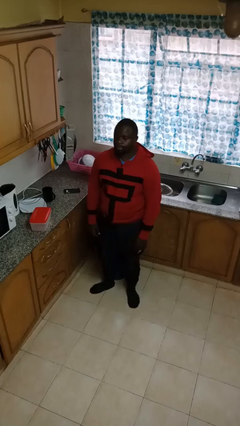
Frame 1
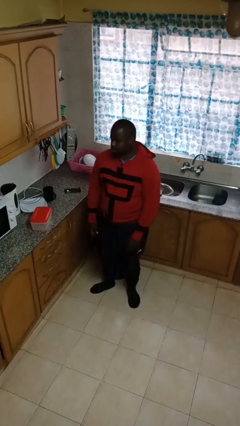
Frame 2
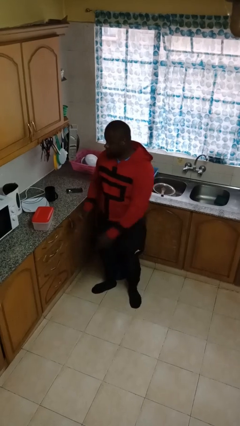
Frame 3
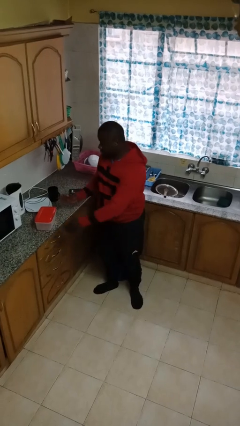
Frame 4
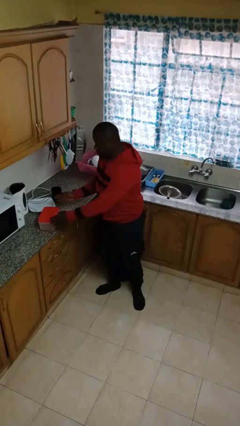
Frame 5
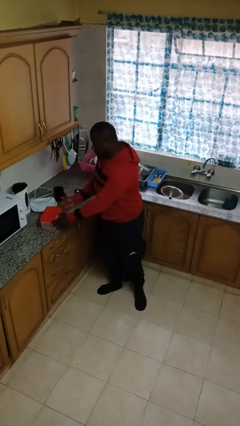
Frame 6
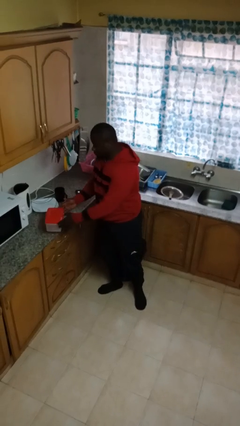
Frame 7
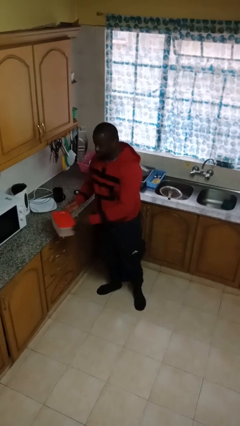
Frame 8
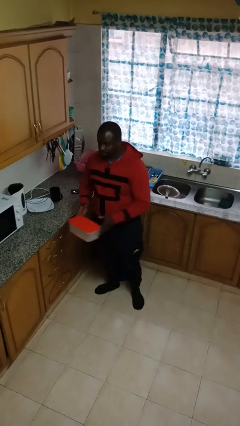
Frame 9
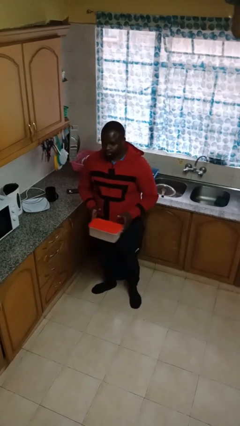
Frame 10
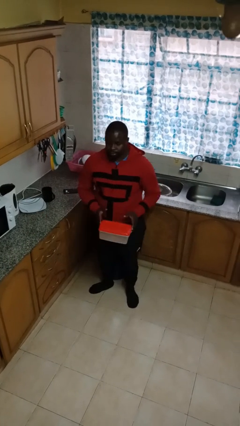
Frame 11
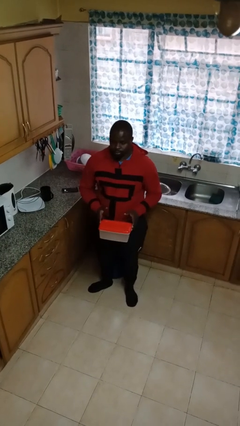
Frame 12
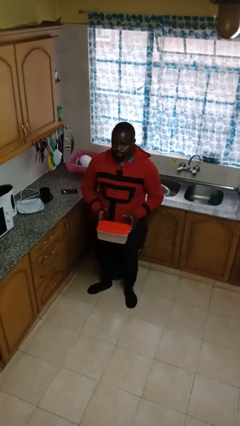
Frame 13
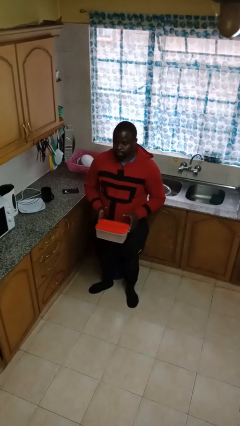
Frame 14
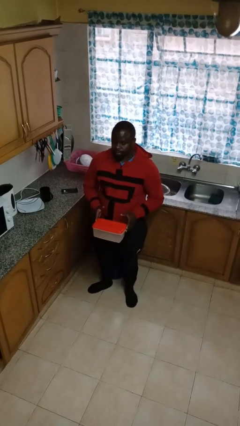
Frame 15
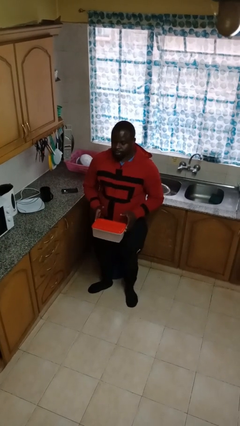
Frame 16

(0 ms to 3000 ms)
person picks up object from countertop

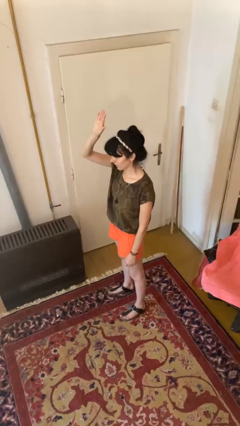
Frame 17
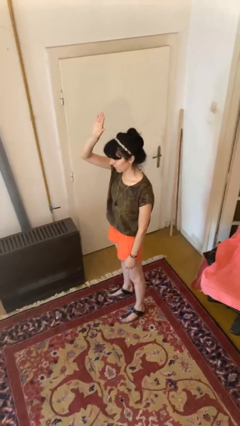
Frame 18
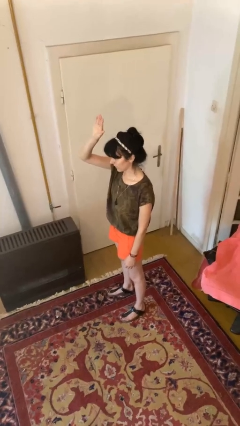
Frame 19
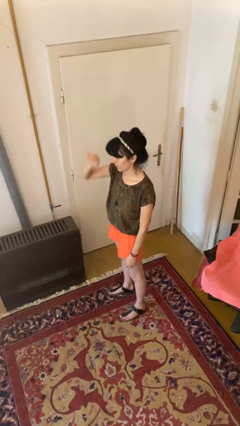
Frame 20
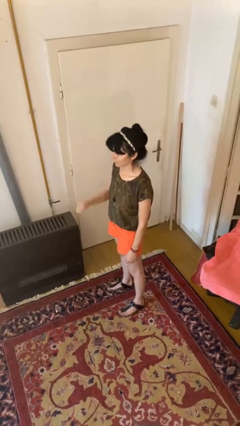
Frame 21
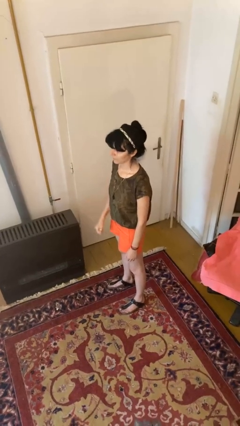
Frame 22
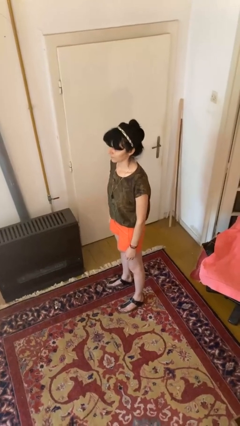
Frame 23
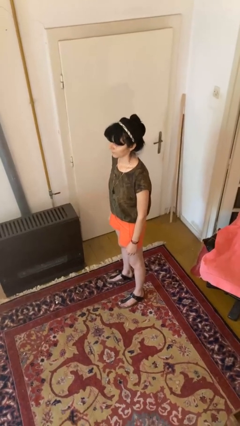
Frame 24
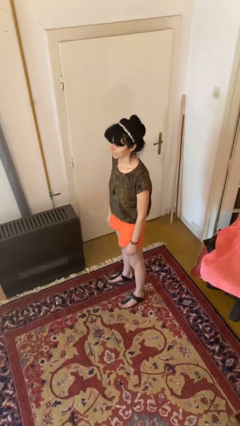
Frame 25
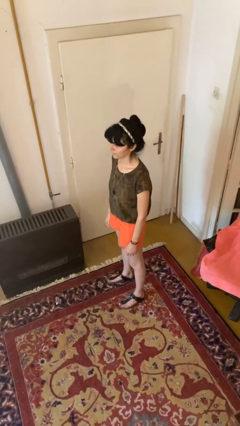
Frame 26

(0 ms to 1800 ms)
person gestures lower hand

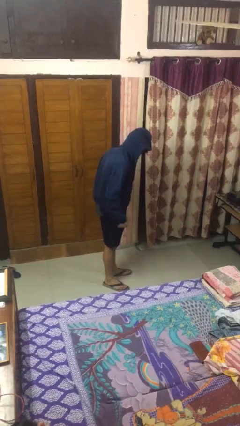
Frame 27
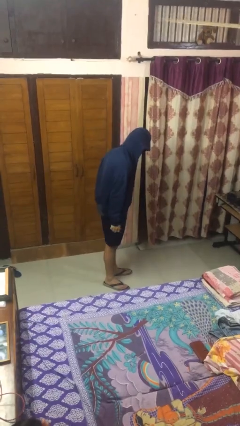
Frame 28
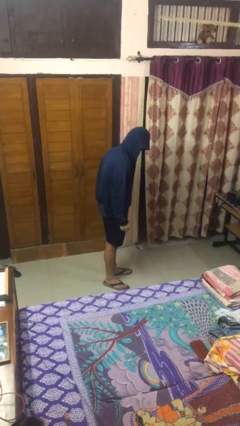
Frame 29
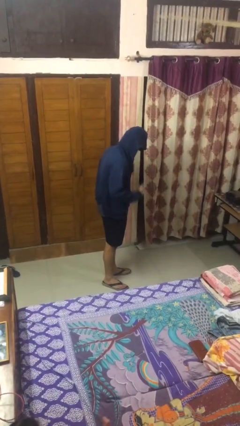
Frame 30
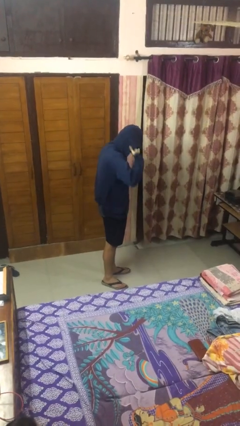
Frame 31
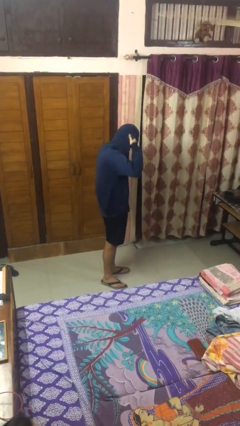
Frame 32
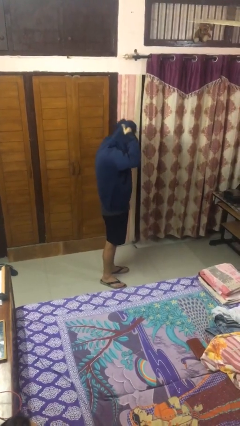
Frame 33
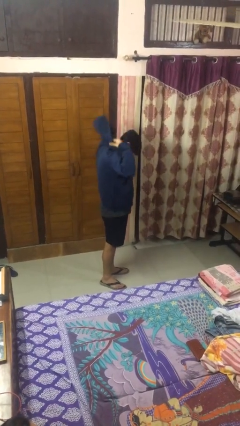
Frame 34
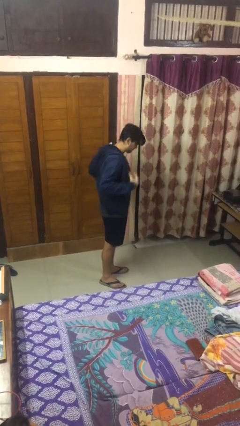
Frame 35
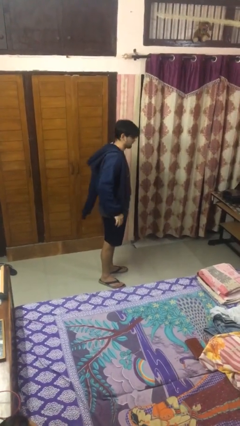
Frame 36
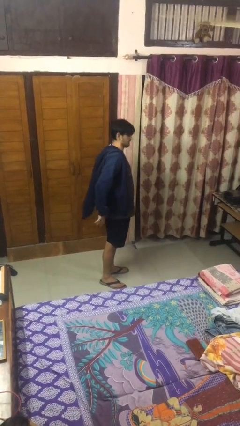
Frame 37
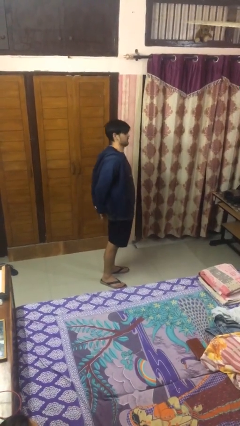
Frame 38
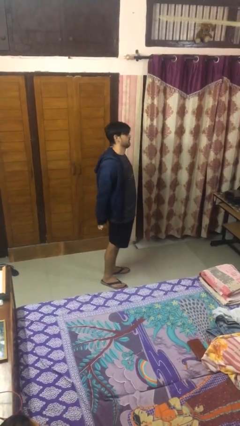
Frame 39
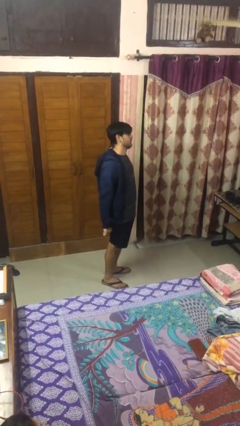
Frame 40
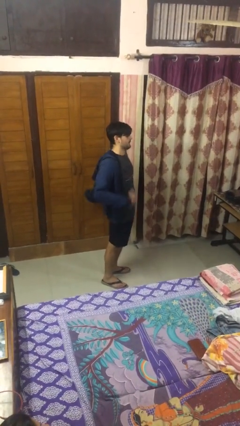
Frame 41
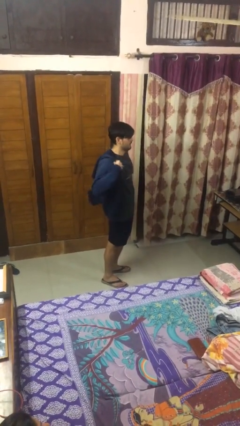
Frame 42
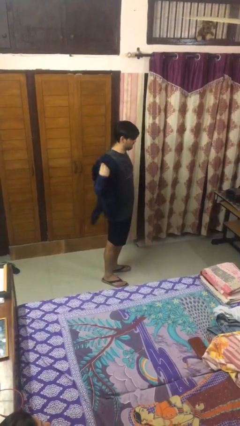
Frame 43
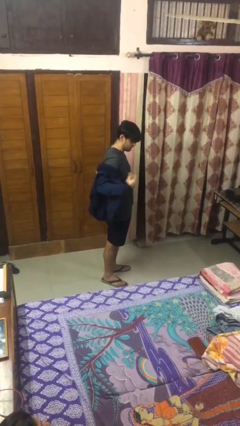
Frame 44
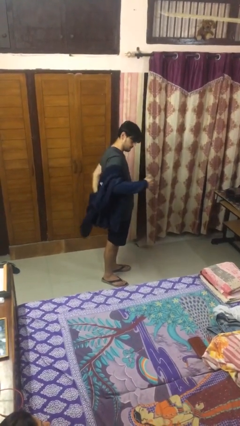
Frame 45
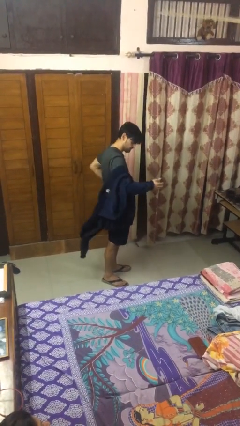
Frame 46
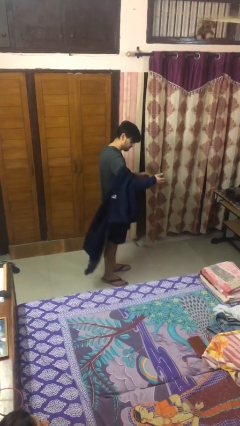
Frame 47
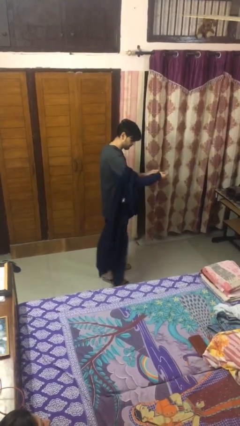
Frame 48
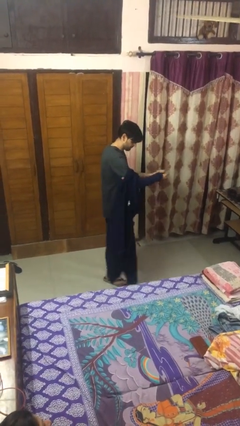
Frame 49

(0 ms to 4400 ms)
person takes off hoodie

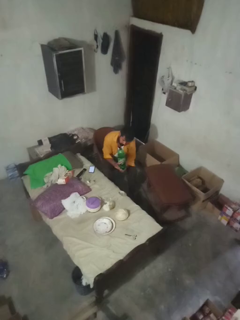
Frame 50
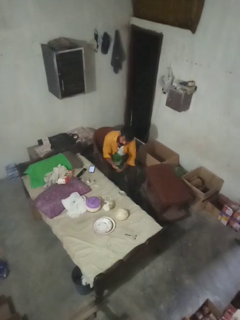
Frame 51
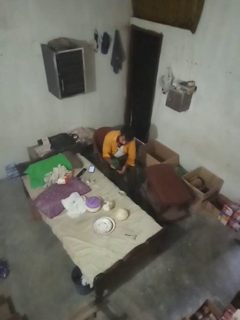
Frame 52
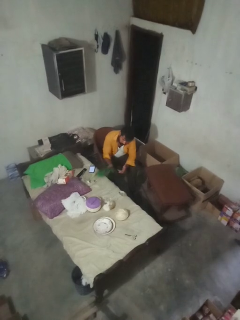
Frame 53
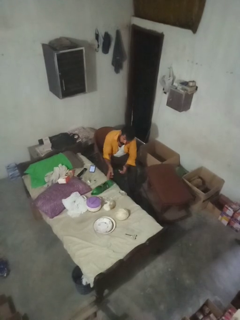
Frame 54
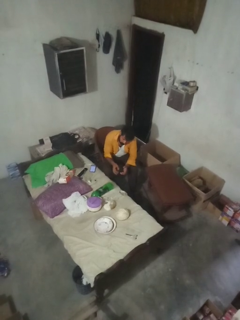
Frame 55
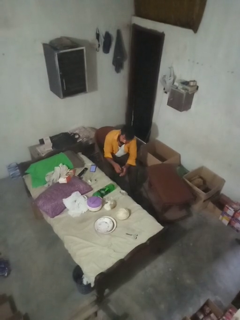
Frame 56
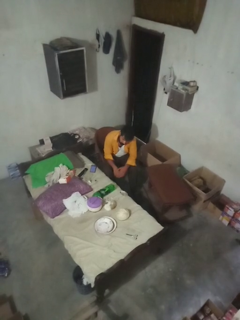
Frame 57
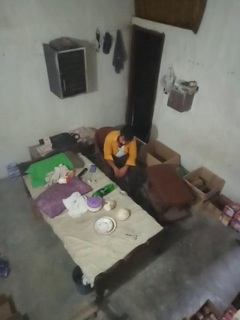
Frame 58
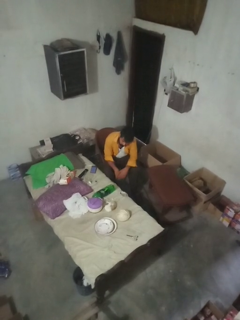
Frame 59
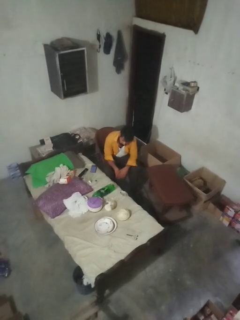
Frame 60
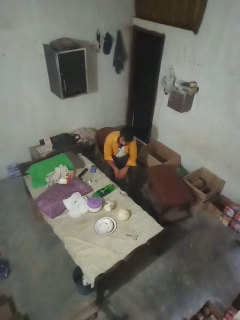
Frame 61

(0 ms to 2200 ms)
person puts down object on bed

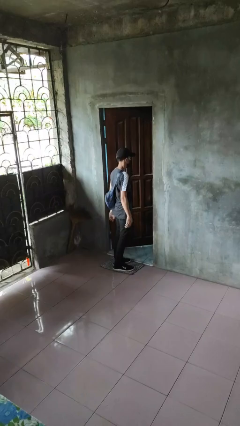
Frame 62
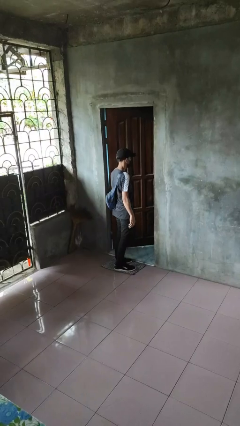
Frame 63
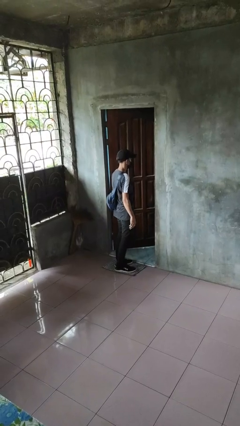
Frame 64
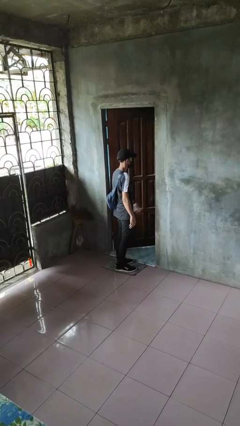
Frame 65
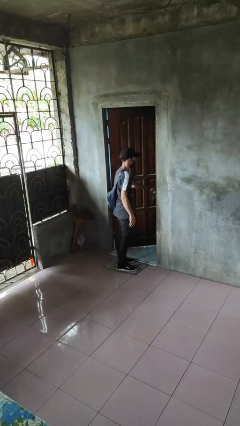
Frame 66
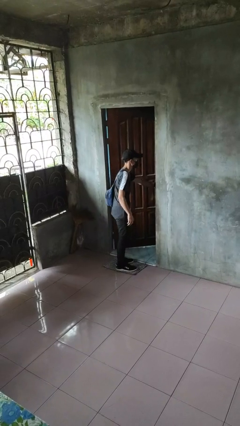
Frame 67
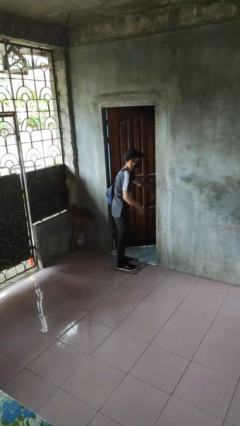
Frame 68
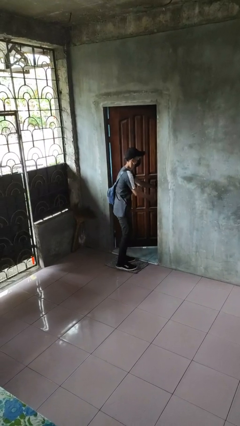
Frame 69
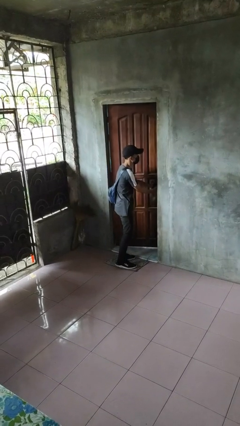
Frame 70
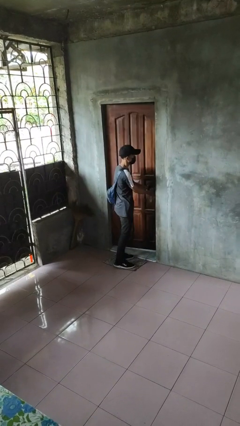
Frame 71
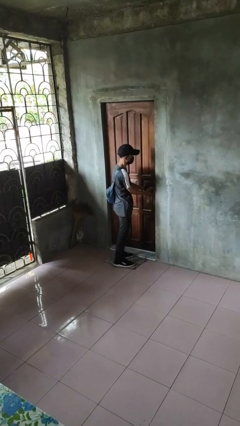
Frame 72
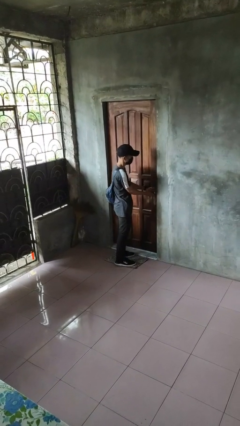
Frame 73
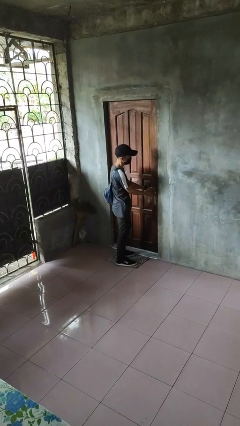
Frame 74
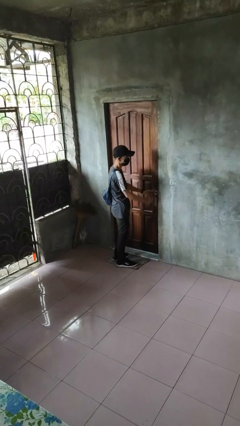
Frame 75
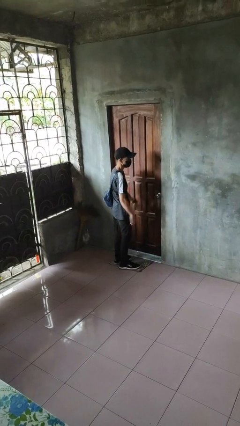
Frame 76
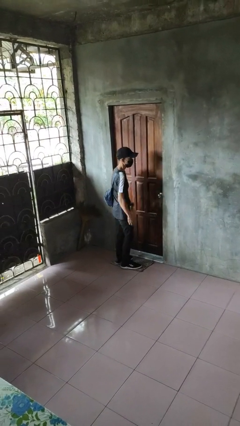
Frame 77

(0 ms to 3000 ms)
person closes facility door

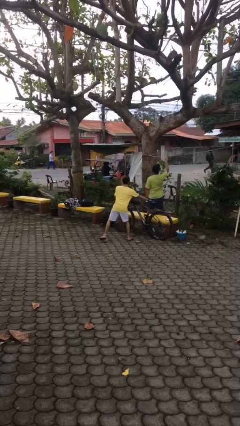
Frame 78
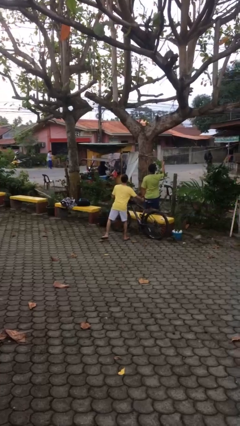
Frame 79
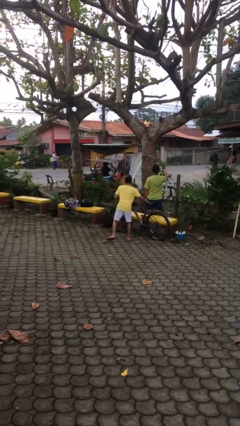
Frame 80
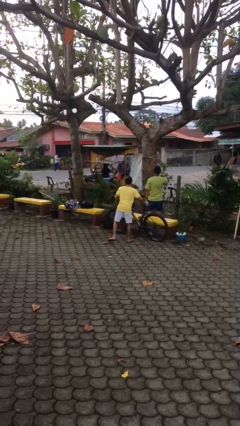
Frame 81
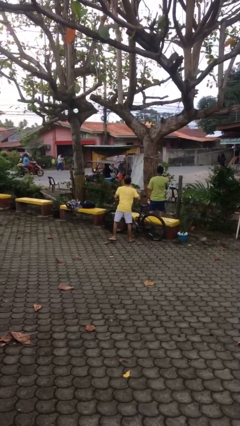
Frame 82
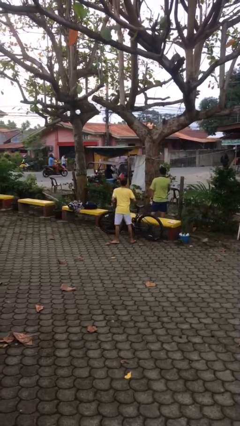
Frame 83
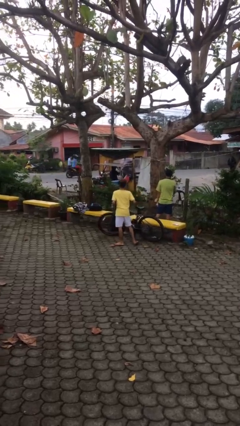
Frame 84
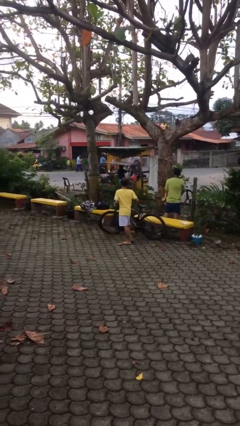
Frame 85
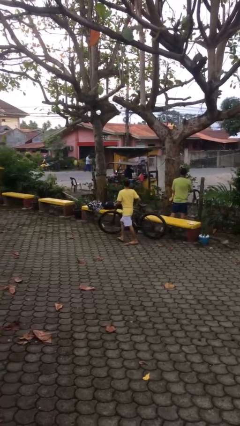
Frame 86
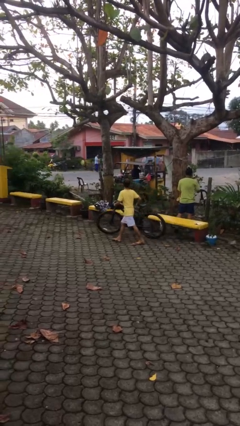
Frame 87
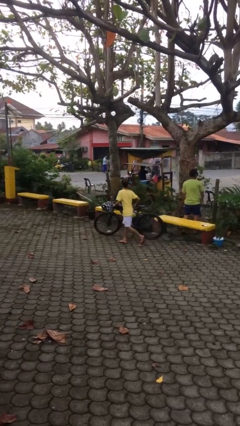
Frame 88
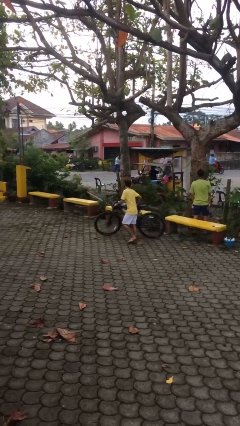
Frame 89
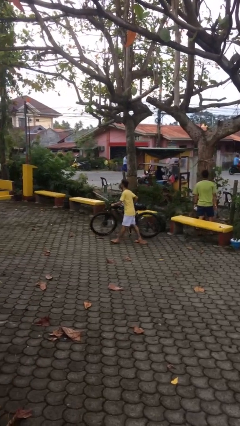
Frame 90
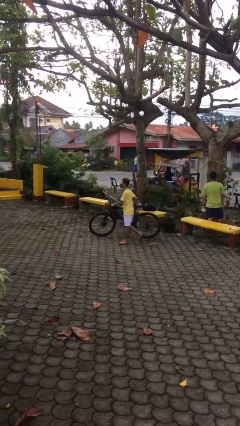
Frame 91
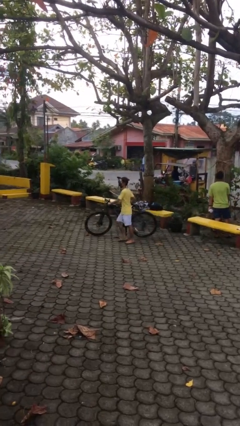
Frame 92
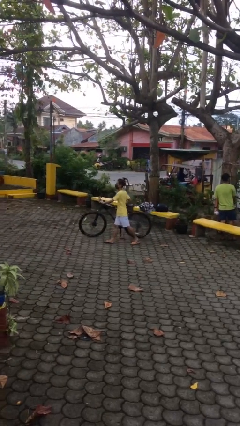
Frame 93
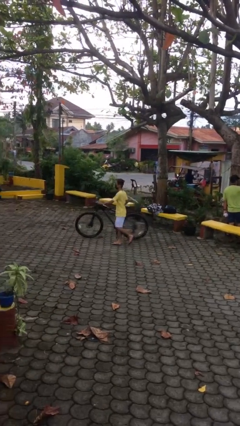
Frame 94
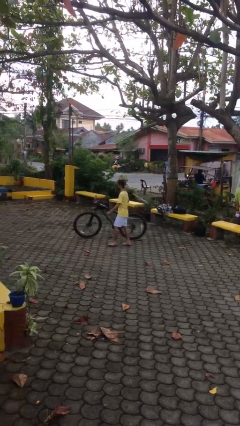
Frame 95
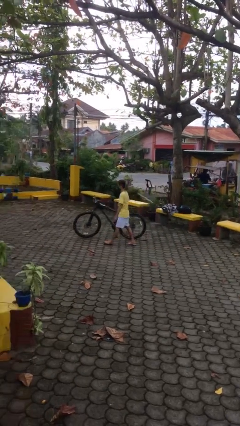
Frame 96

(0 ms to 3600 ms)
person steals object from person
